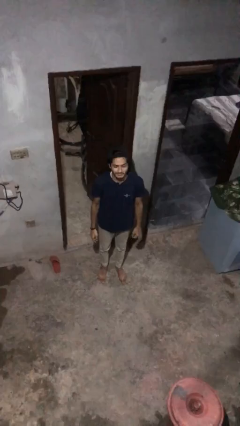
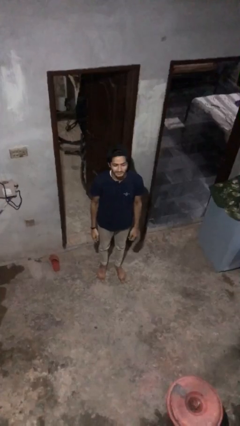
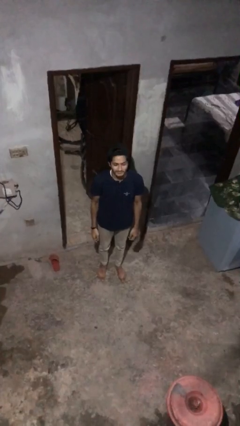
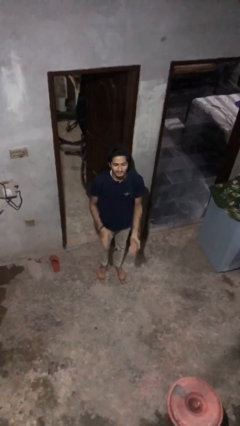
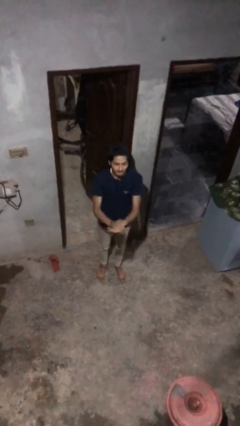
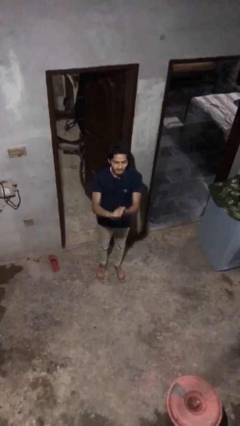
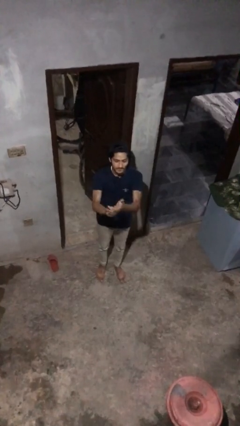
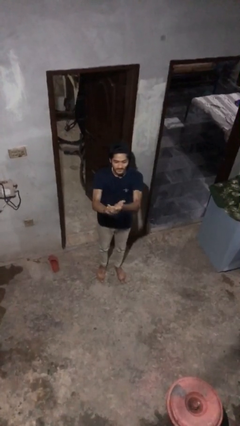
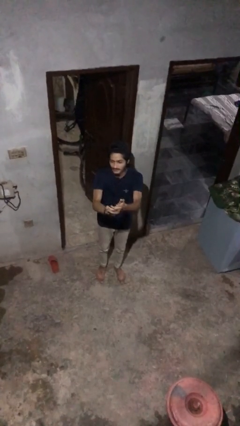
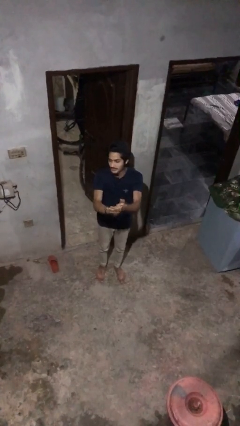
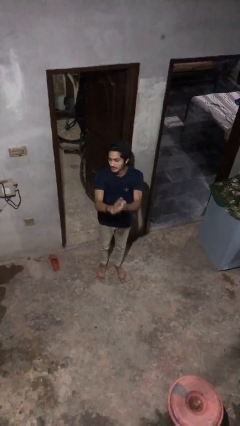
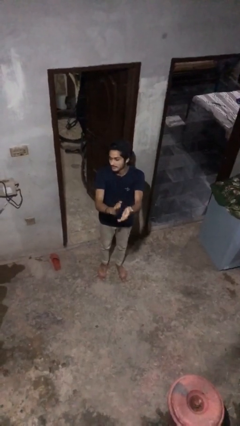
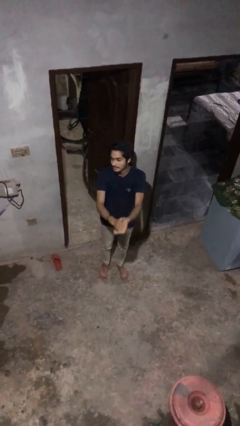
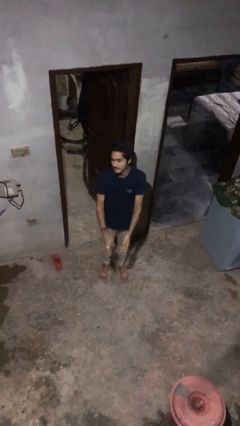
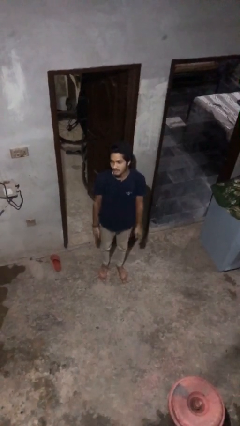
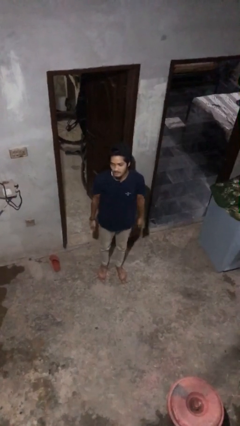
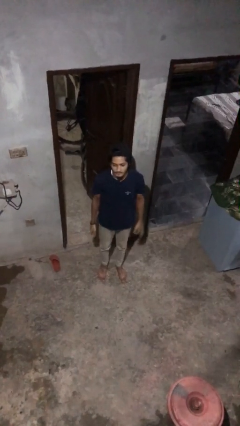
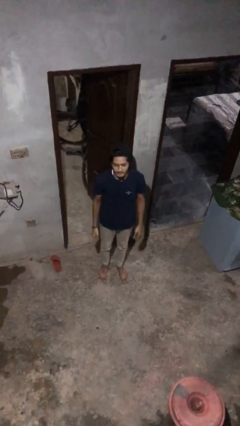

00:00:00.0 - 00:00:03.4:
person claps hands

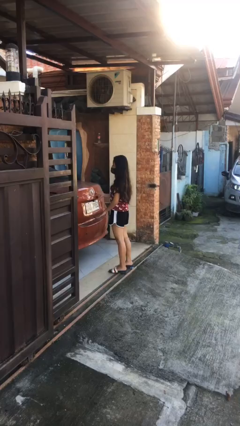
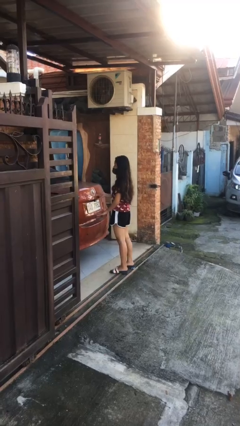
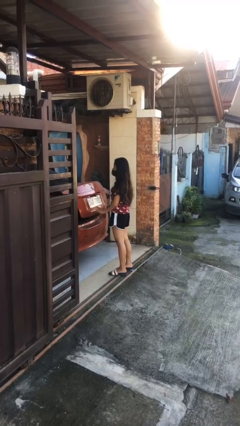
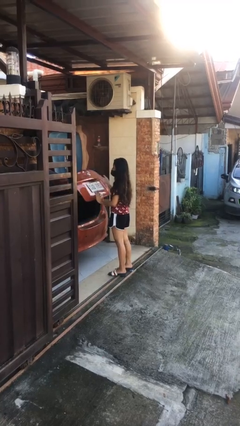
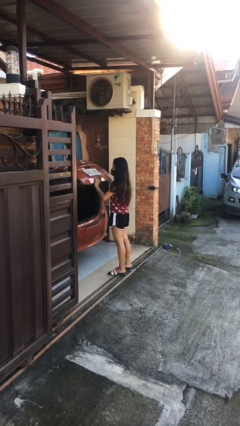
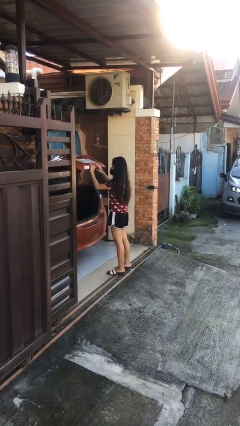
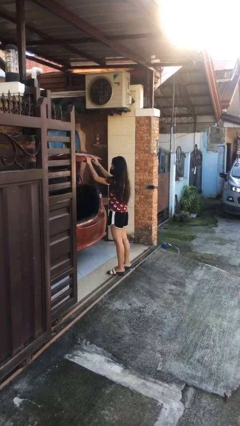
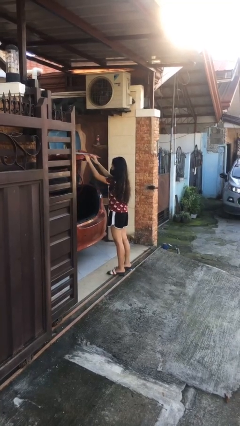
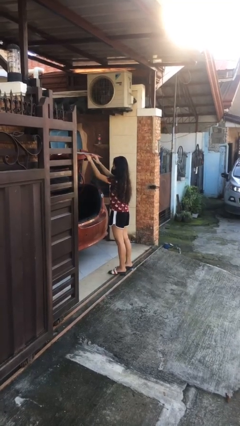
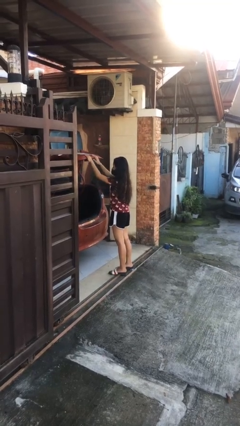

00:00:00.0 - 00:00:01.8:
person opens car trunk

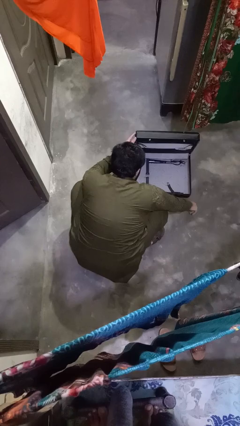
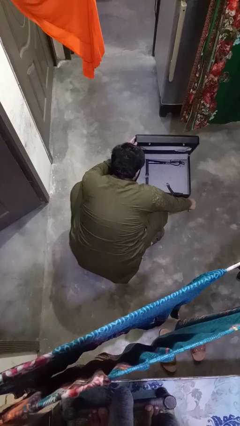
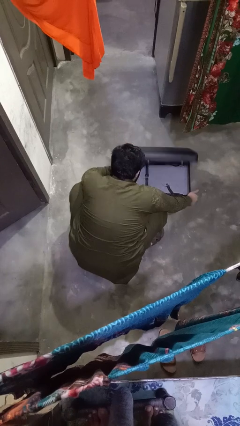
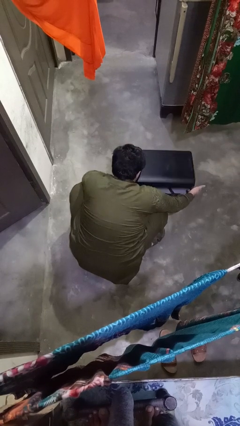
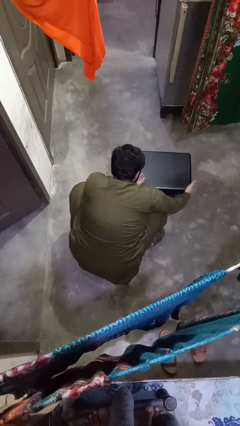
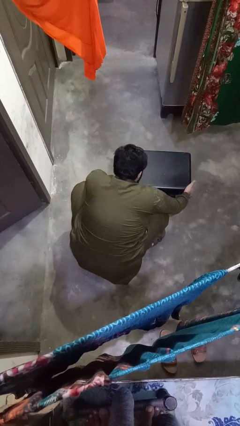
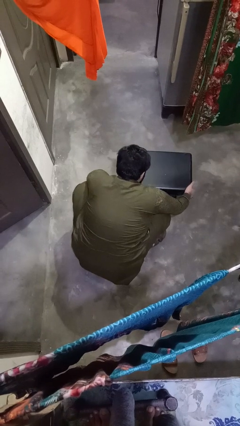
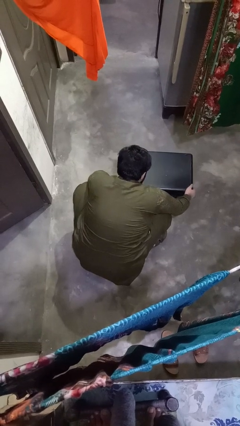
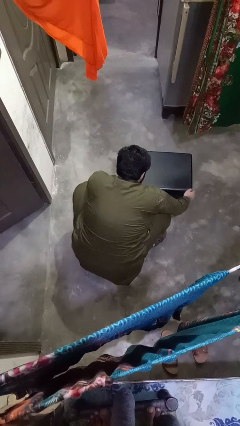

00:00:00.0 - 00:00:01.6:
person closes suitcase

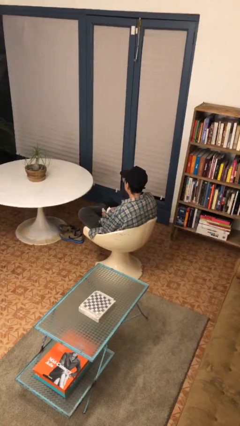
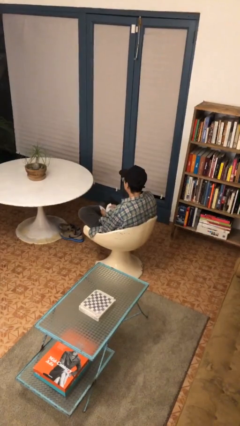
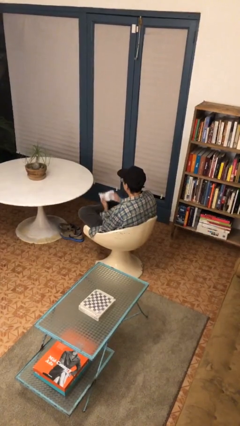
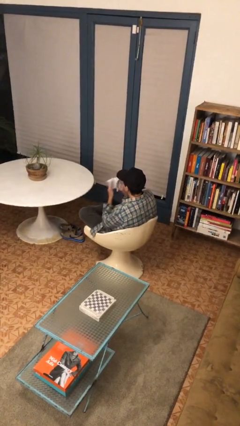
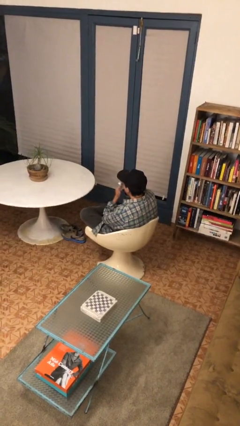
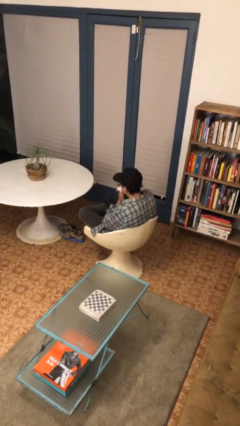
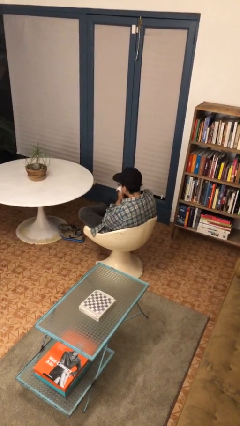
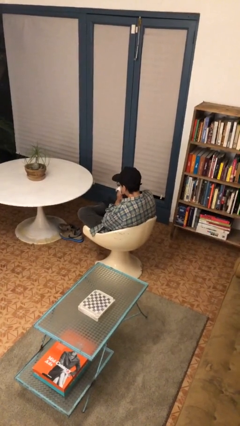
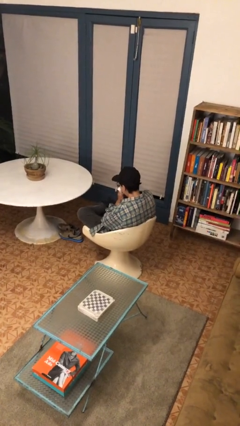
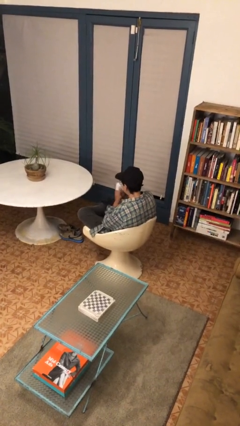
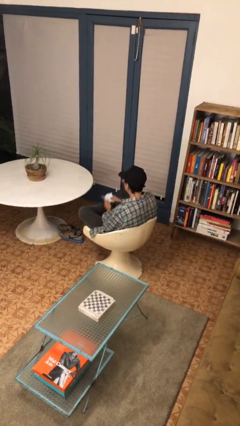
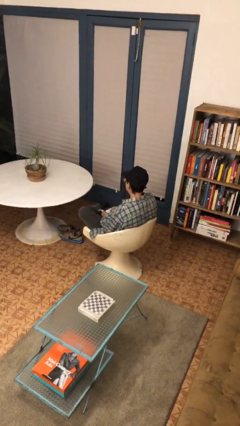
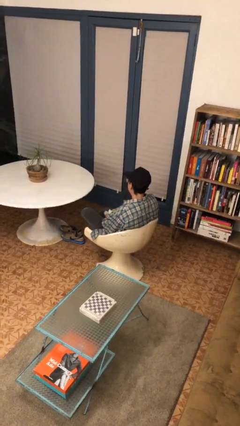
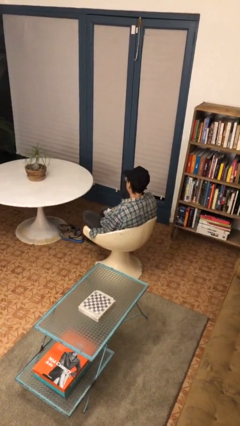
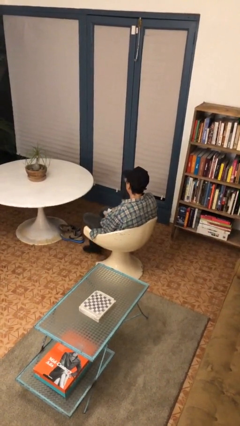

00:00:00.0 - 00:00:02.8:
person blows nose

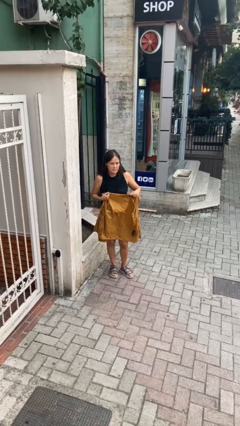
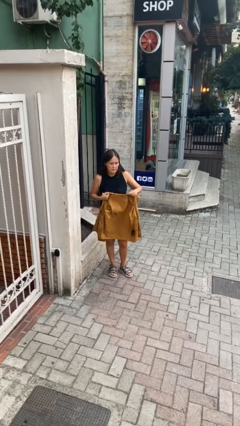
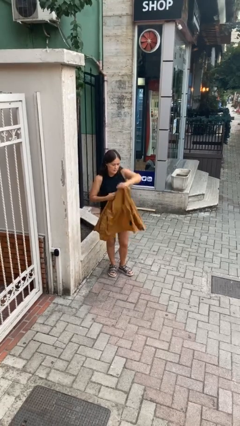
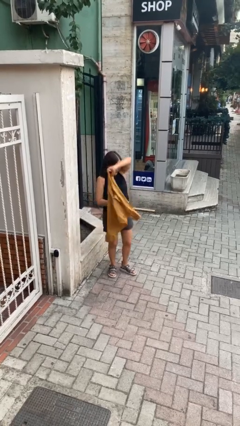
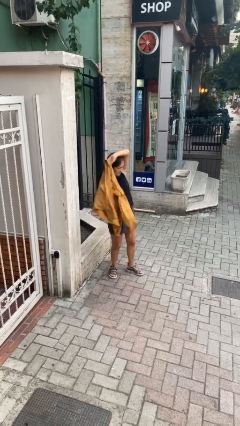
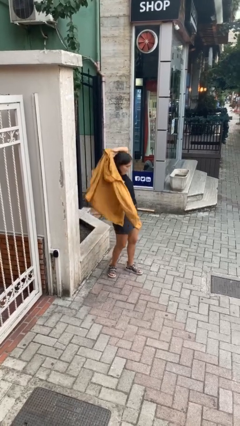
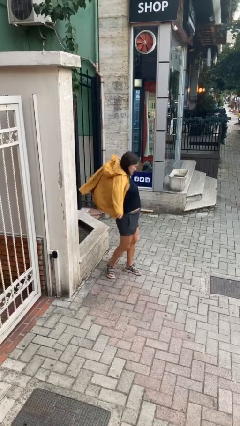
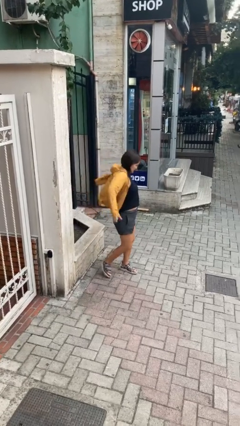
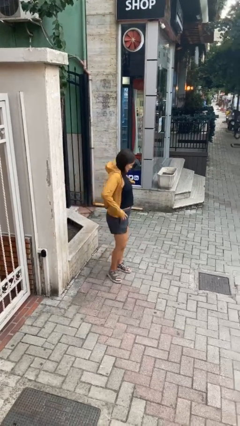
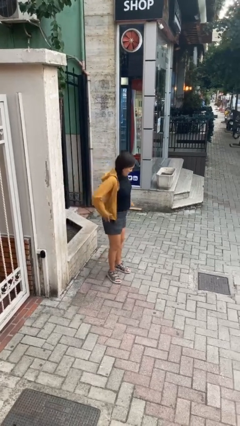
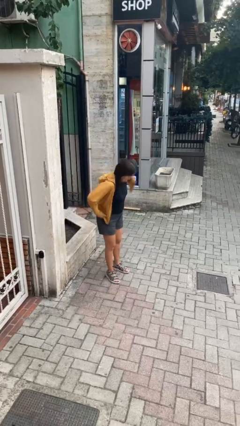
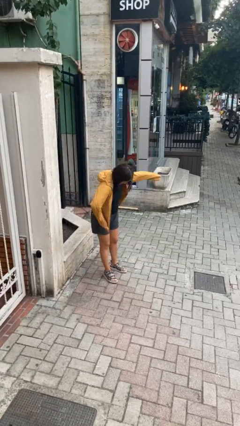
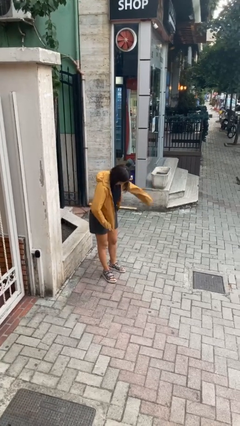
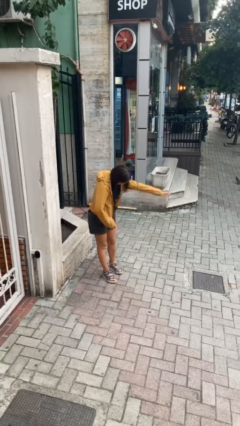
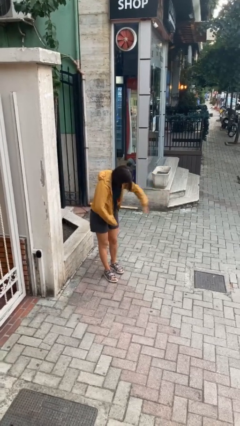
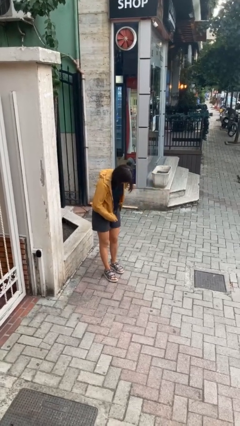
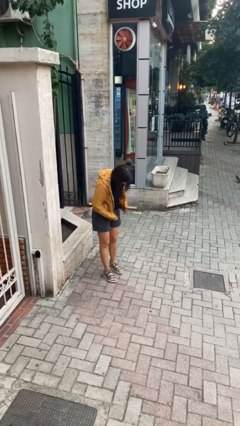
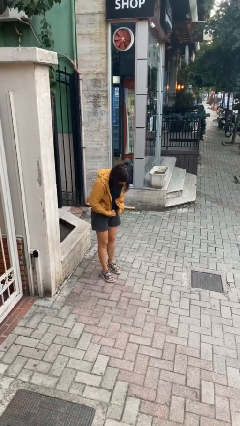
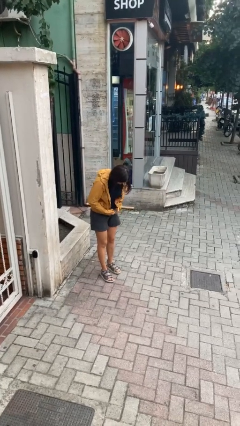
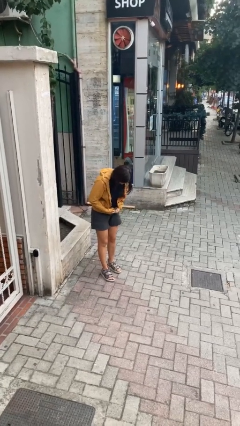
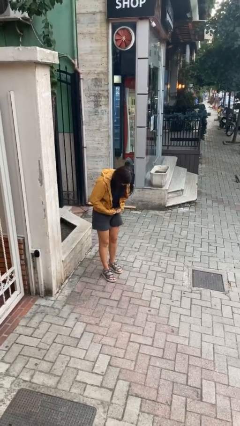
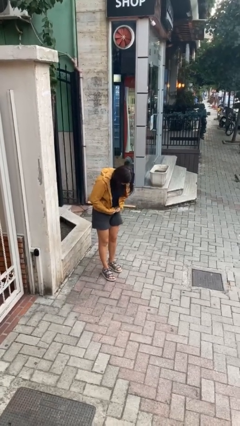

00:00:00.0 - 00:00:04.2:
person puts on jacket

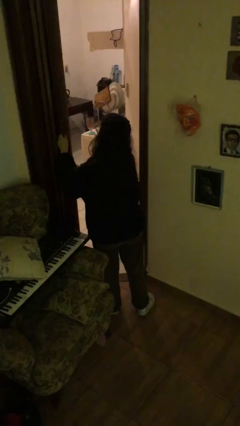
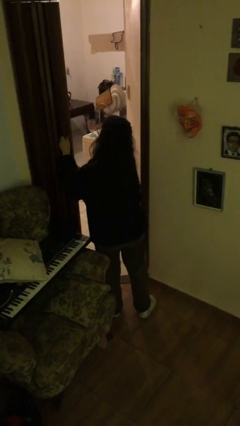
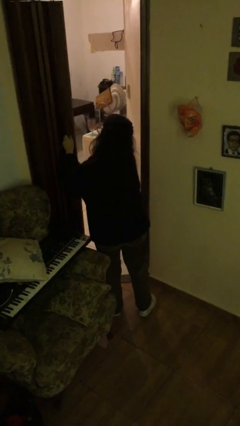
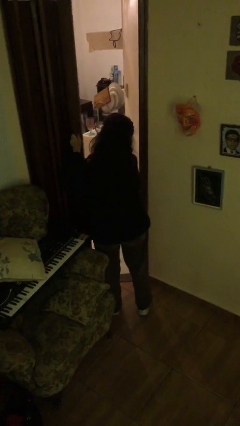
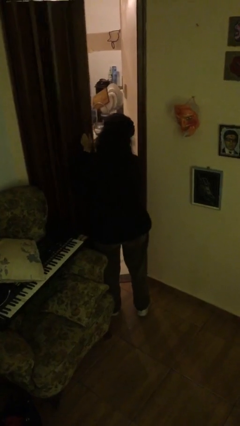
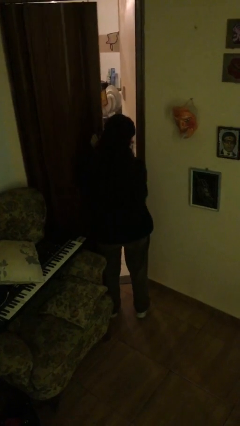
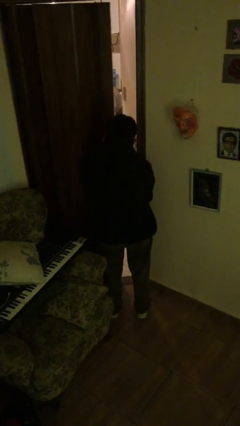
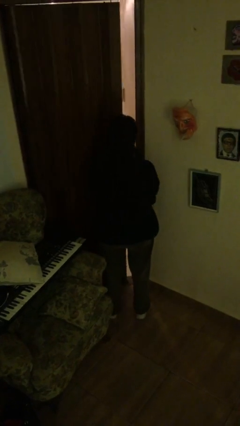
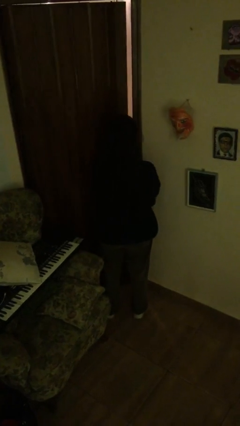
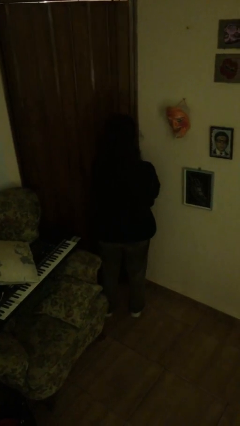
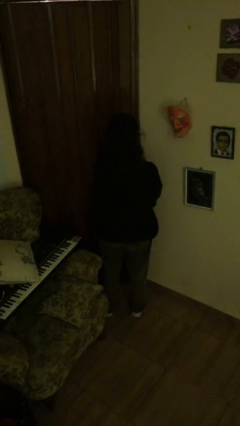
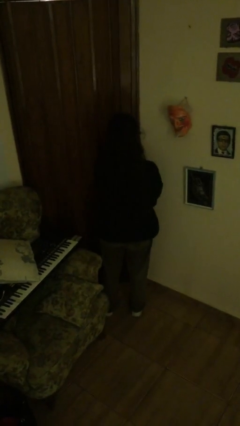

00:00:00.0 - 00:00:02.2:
person closes sliding door

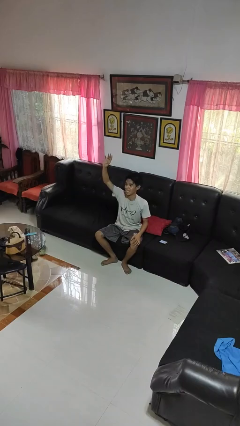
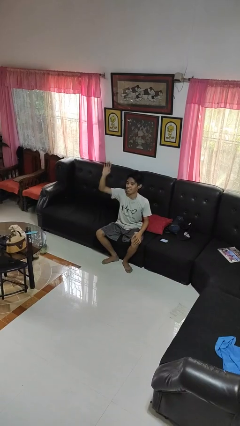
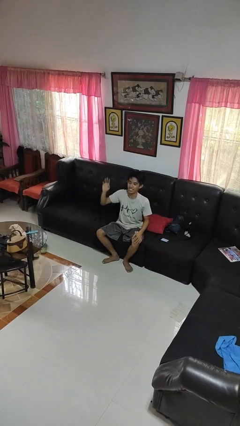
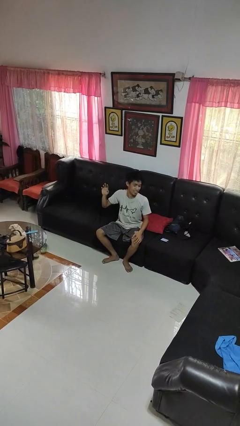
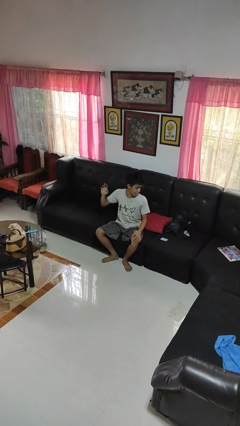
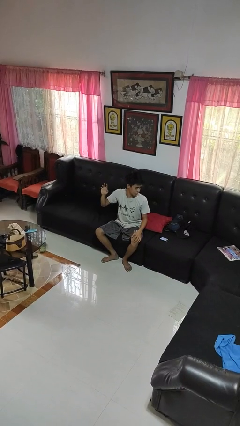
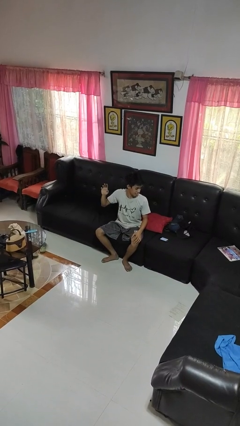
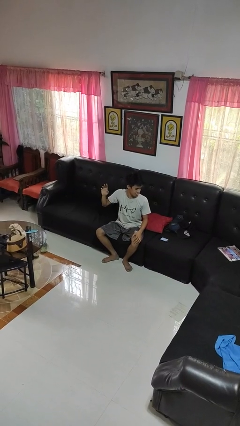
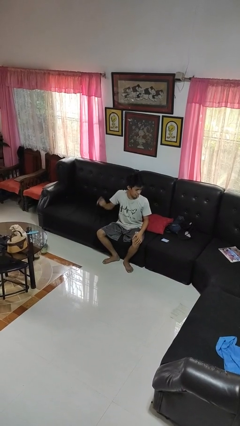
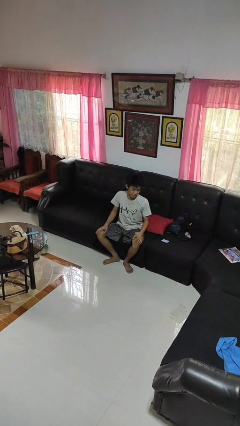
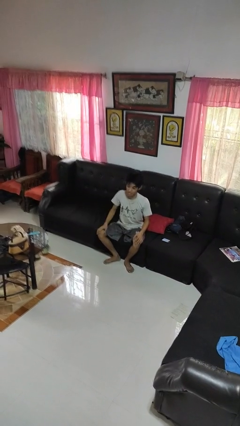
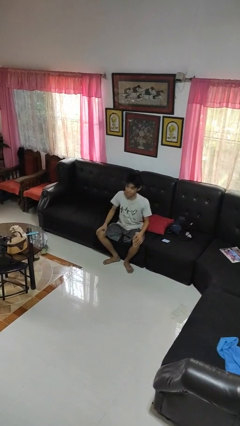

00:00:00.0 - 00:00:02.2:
person gestures lower hand
